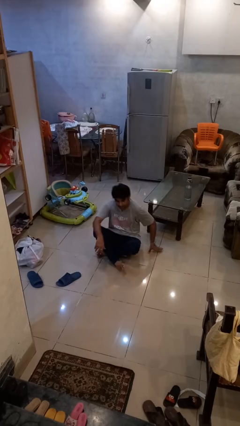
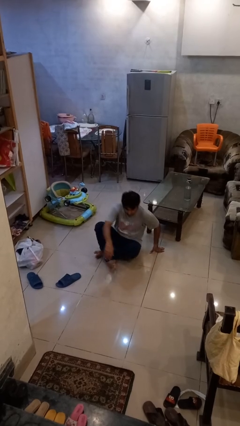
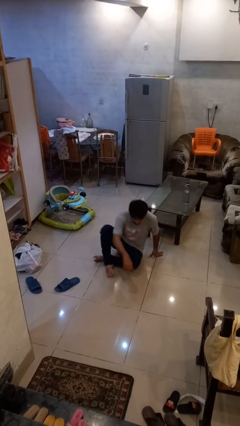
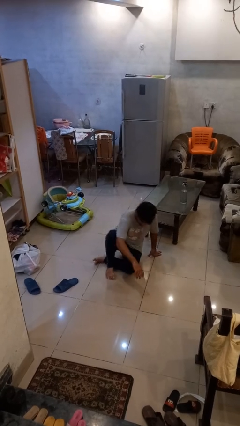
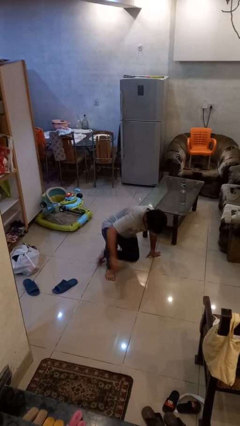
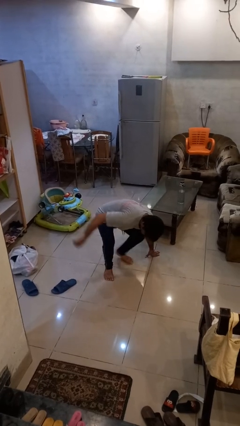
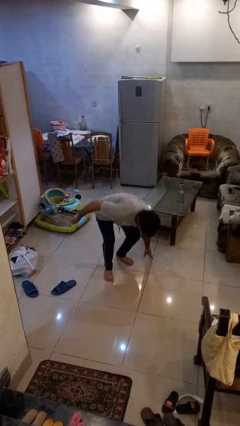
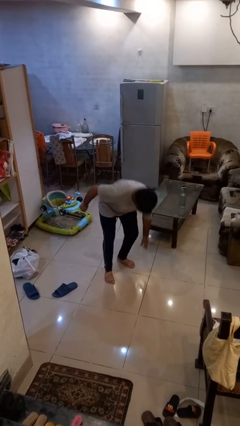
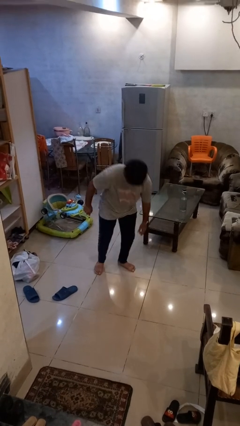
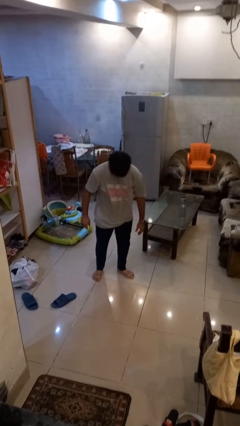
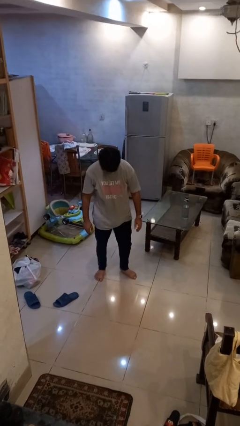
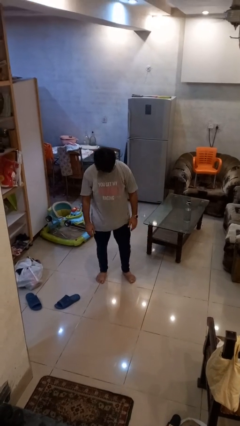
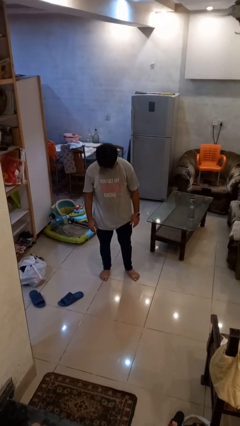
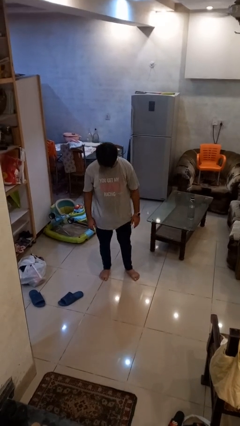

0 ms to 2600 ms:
person stands up from floor

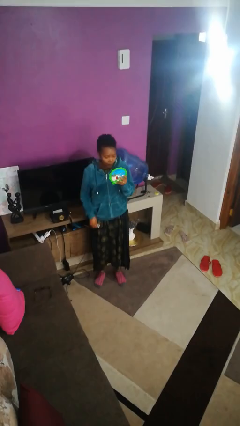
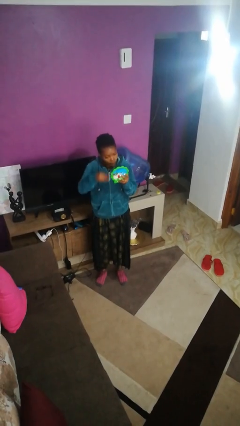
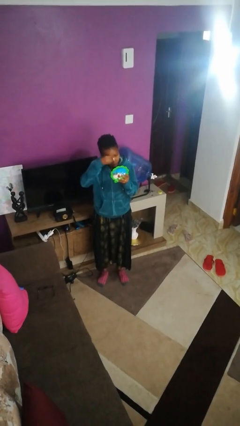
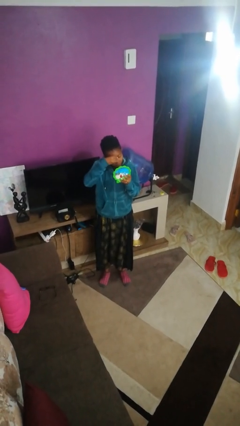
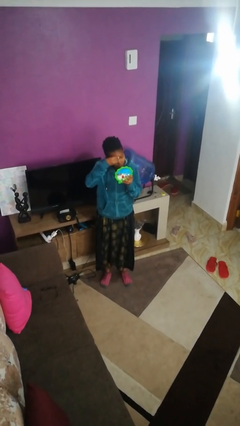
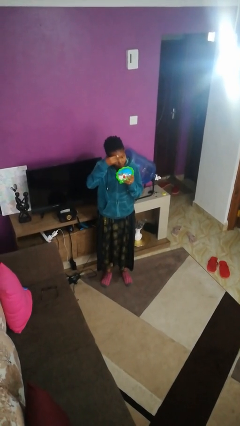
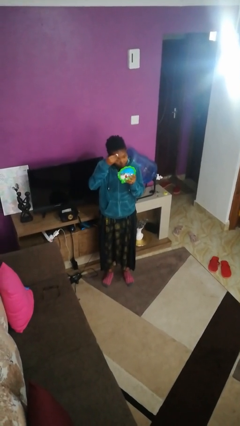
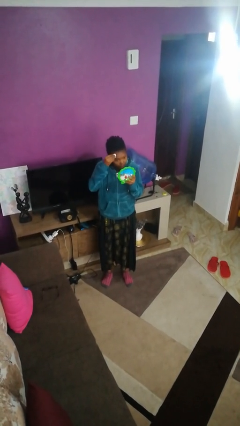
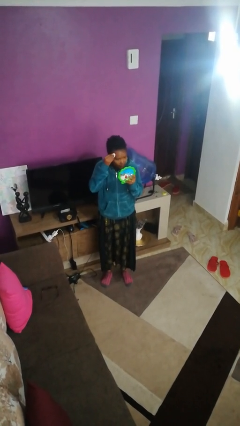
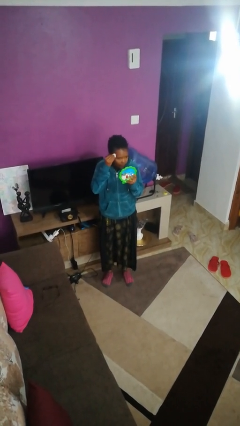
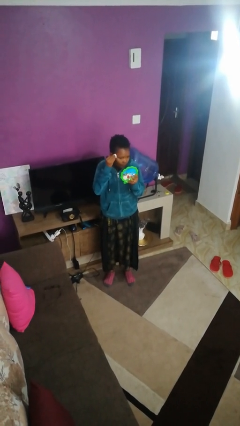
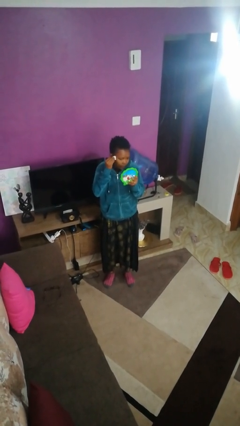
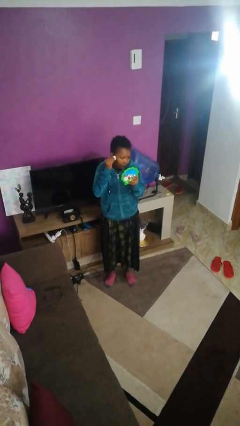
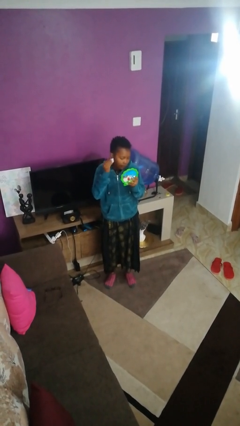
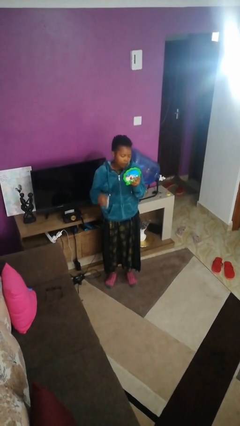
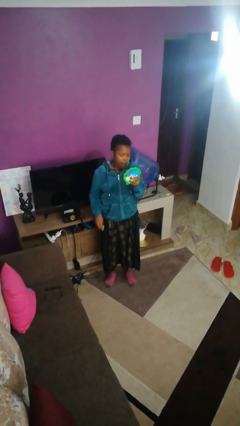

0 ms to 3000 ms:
person applies foundation makeup

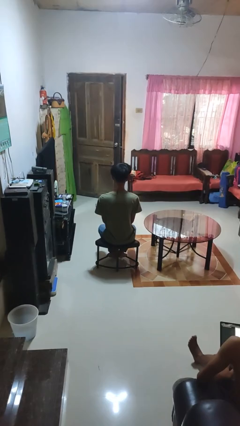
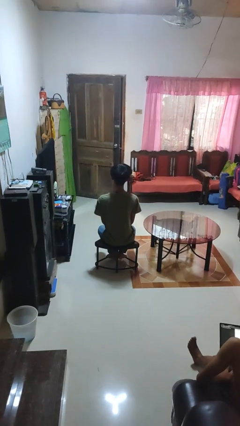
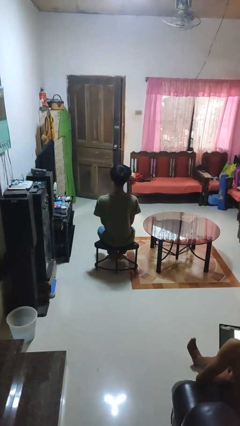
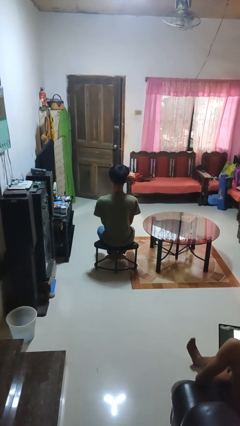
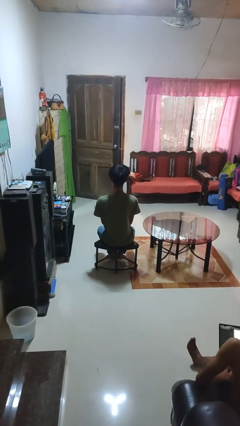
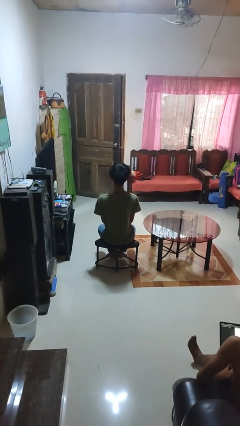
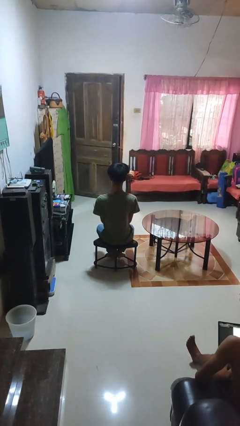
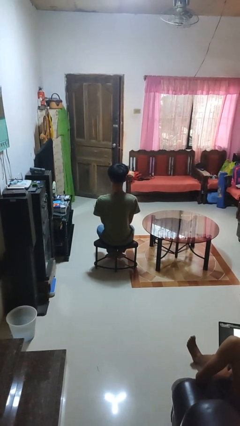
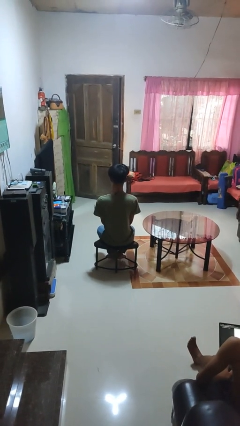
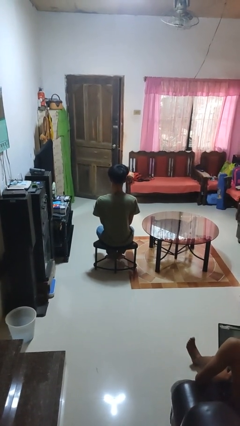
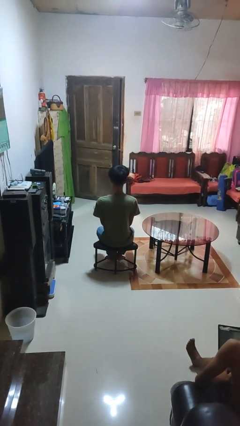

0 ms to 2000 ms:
person nods head

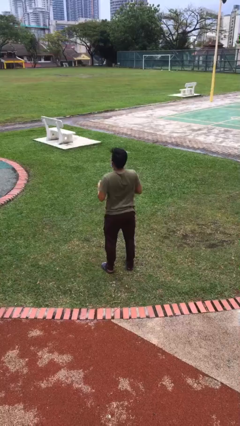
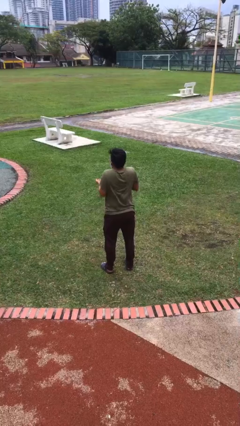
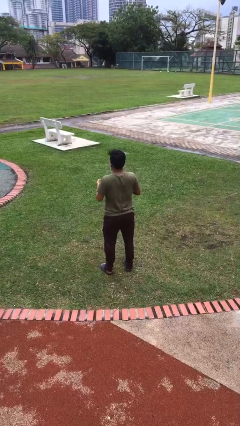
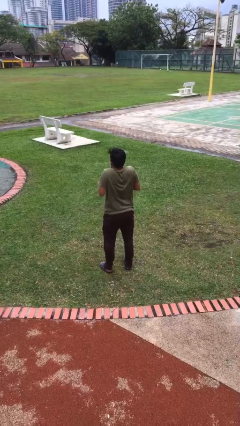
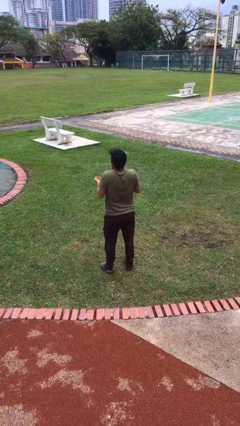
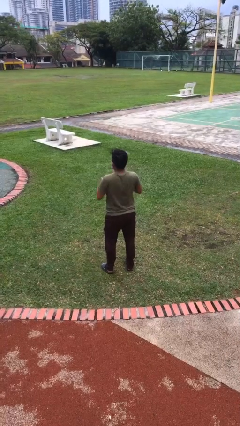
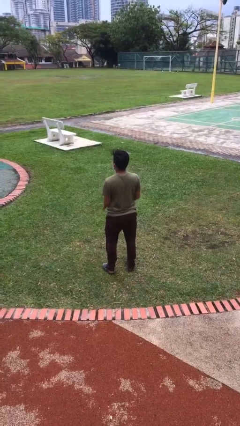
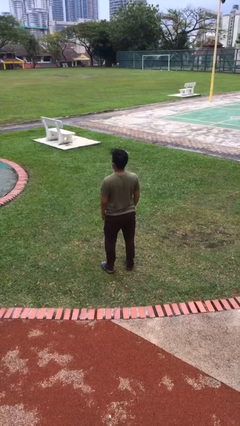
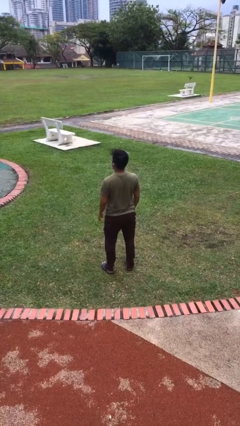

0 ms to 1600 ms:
person shrugs

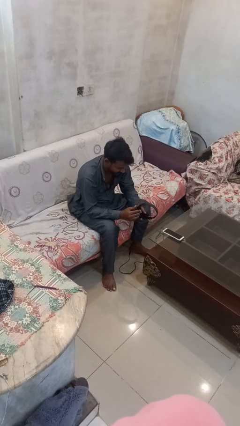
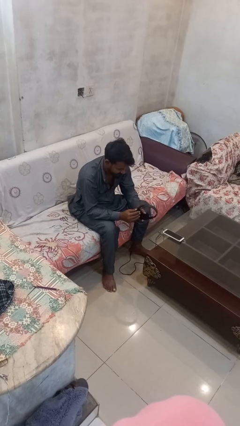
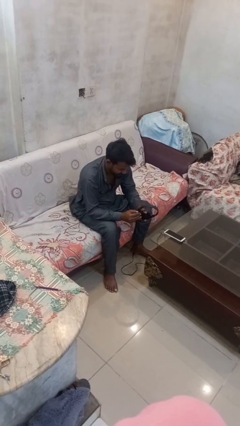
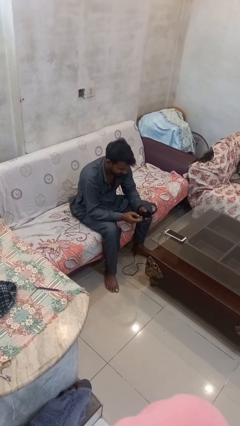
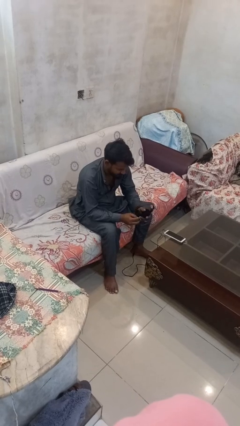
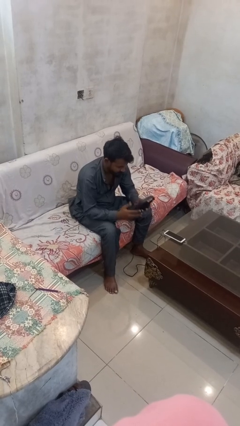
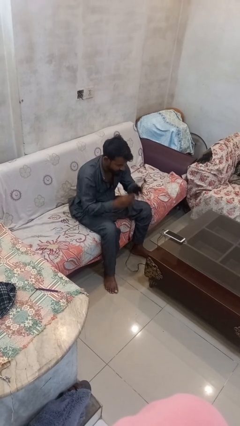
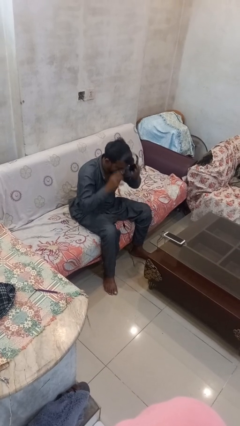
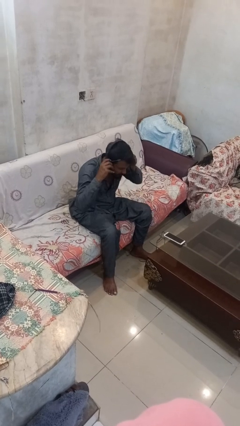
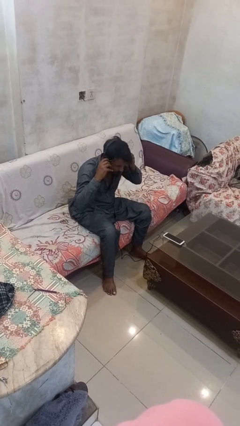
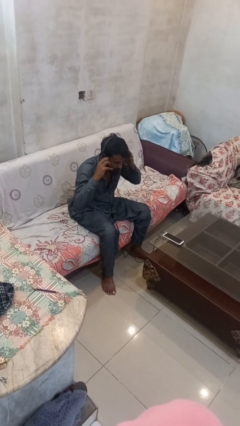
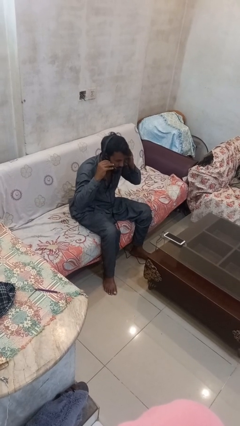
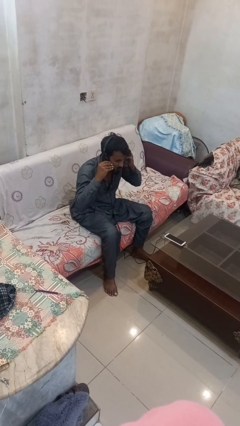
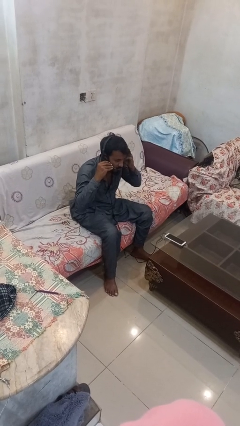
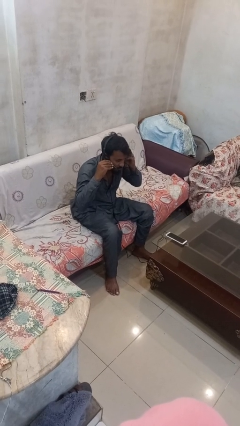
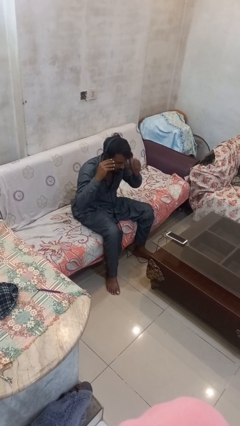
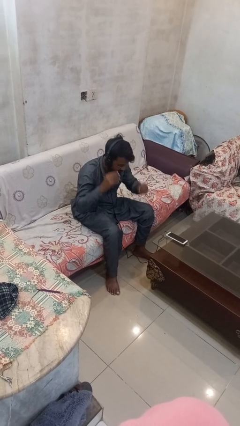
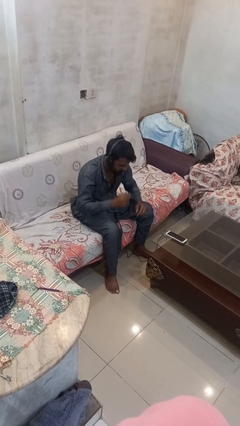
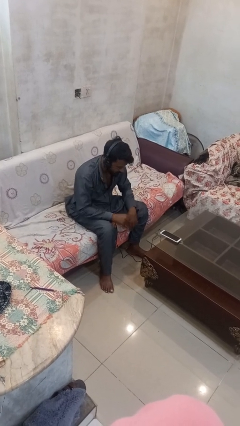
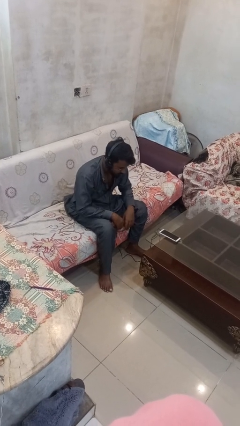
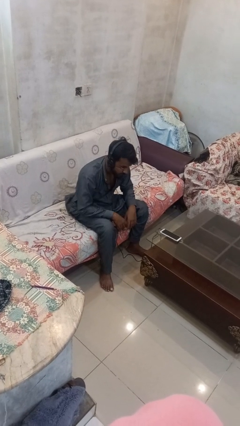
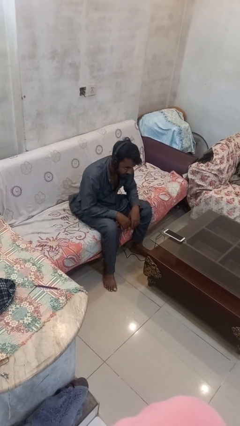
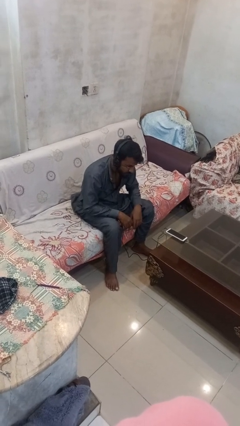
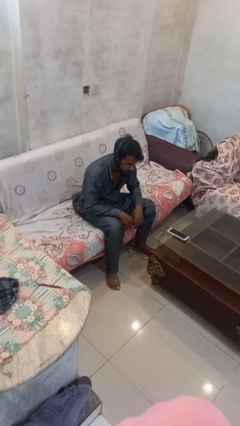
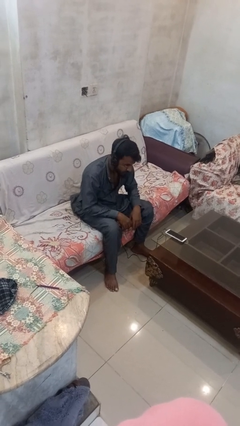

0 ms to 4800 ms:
person puts on headphones

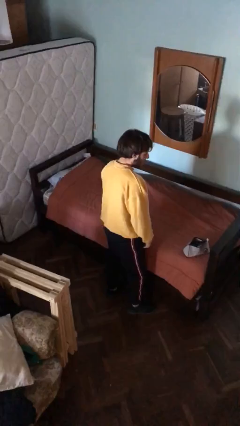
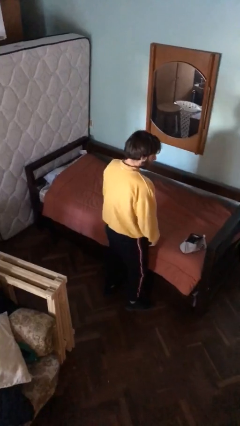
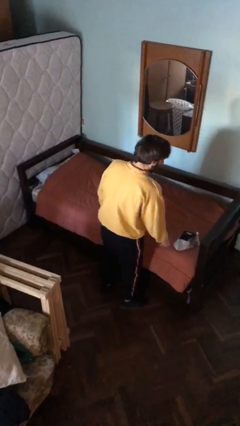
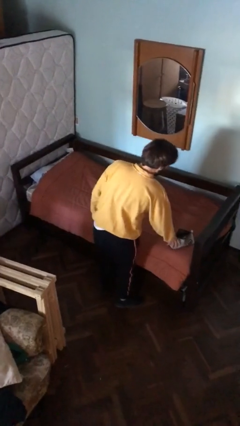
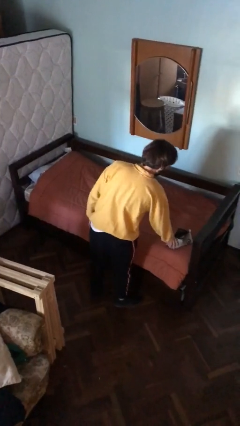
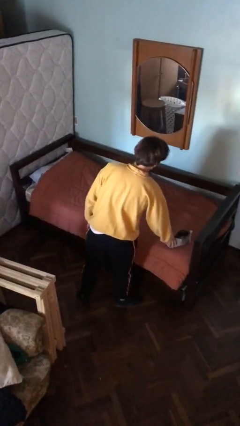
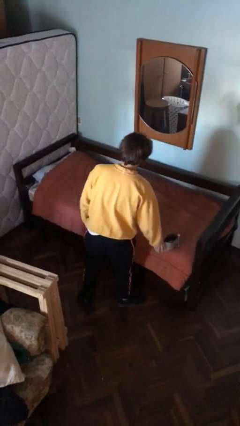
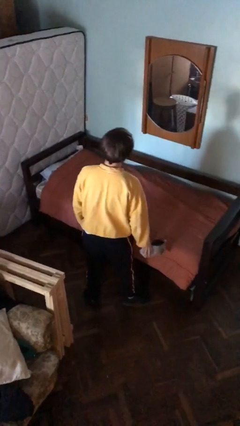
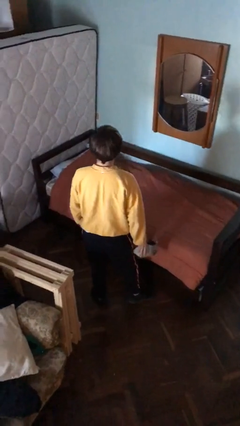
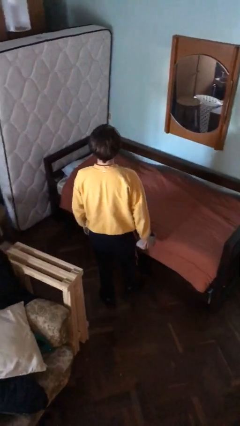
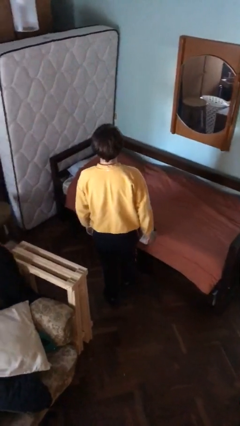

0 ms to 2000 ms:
person picks up object from bed

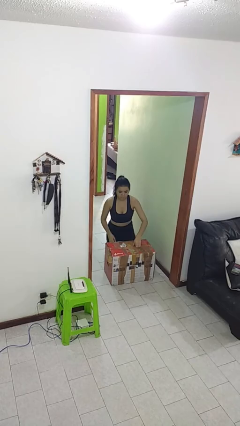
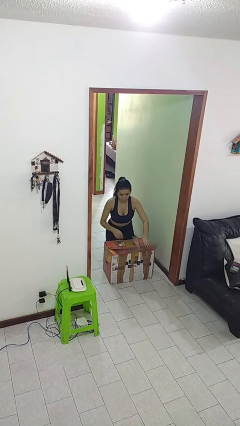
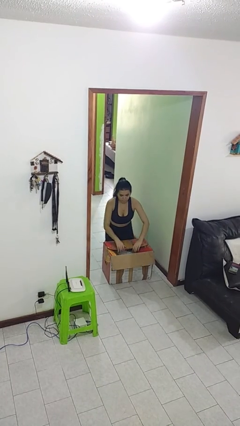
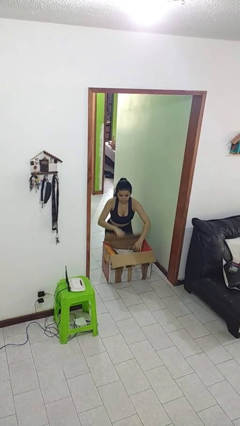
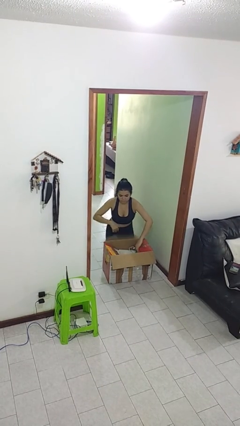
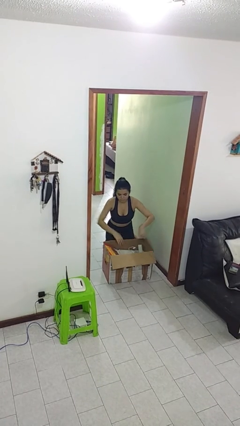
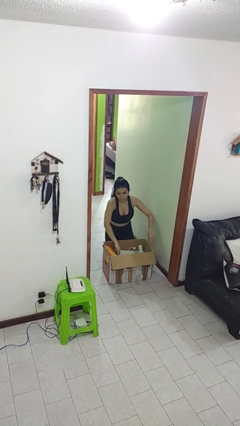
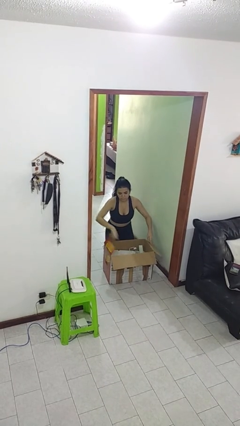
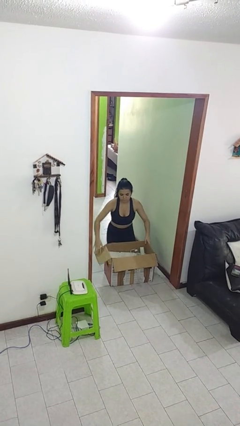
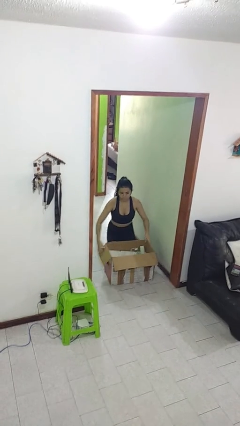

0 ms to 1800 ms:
person opens box
